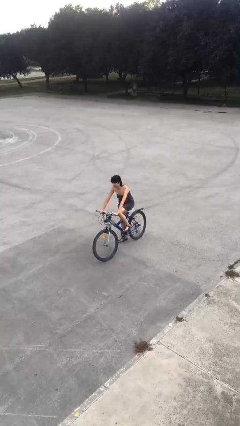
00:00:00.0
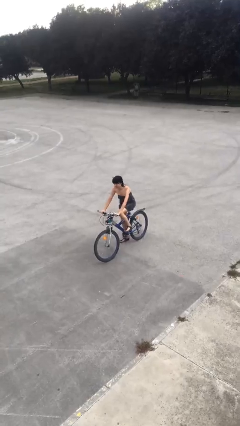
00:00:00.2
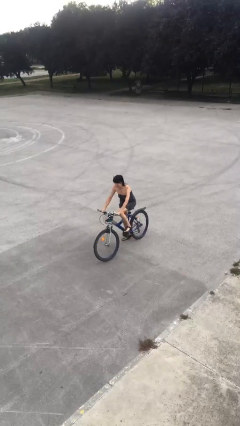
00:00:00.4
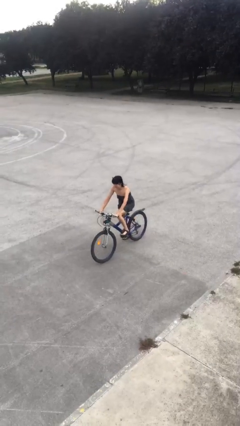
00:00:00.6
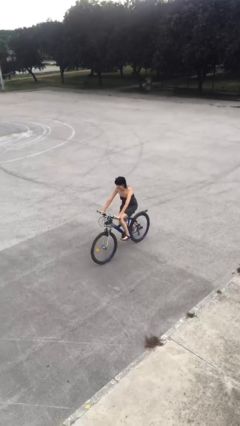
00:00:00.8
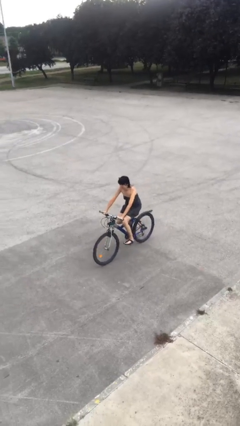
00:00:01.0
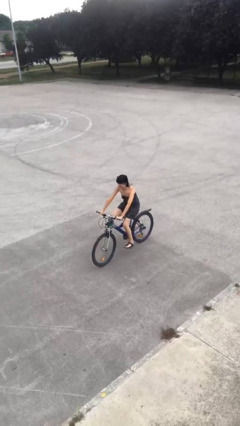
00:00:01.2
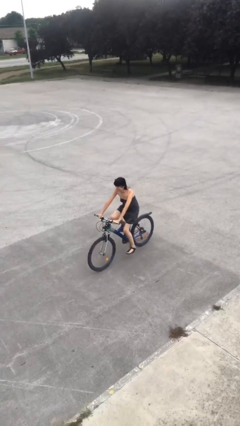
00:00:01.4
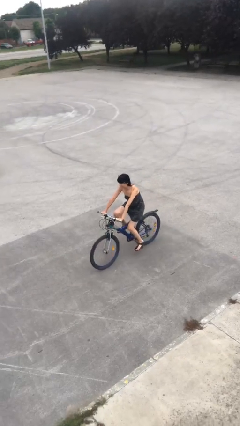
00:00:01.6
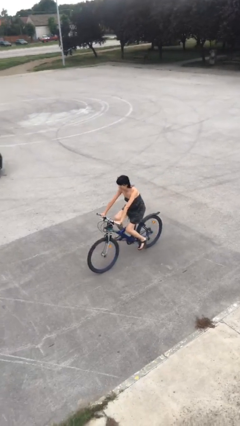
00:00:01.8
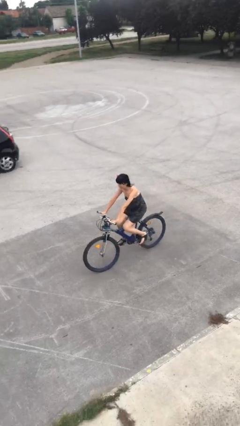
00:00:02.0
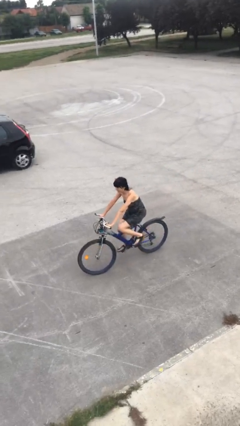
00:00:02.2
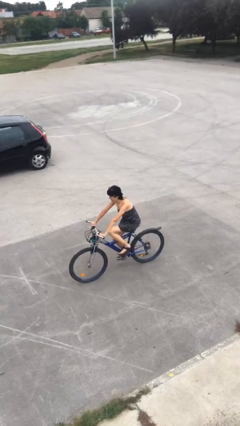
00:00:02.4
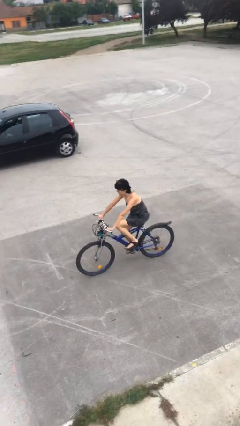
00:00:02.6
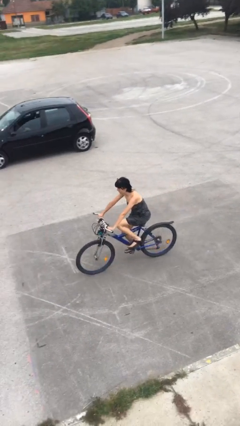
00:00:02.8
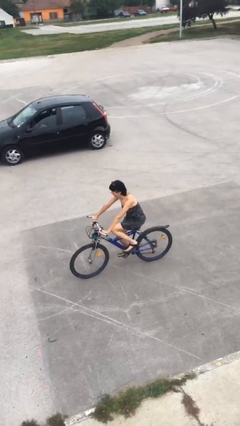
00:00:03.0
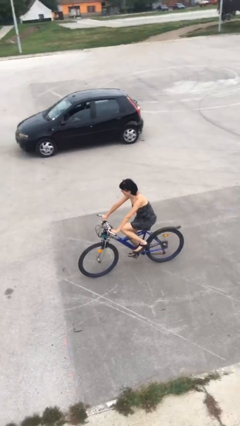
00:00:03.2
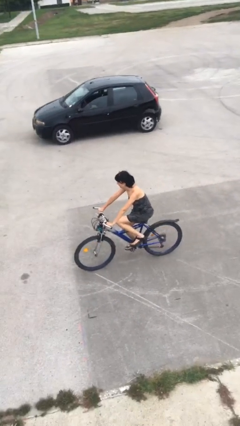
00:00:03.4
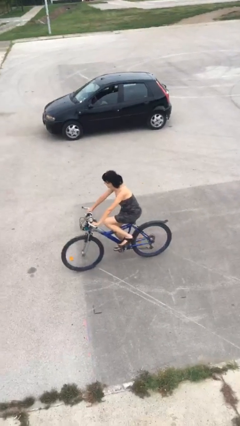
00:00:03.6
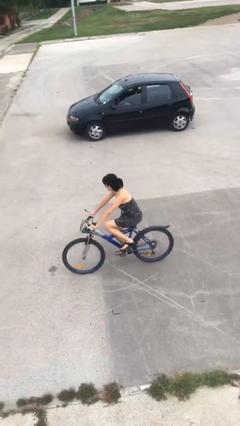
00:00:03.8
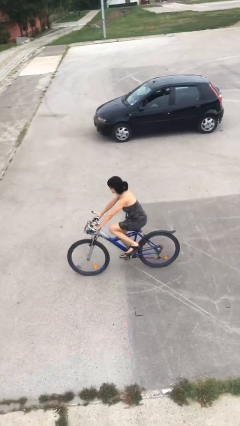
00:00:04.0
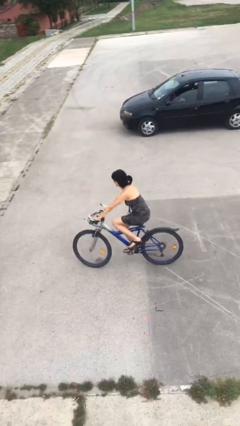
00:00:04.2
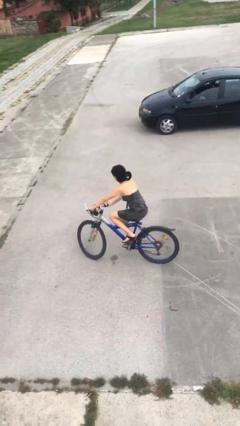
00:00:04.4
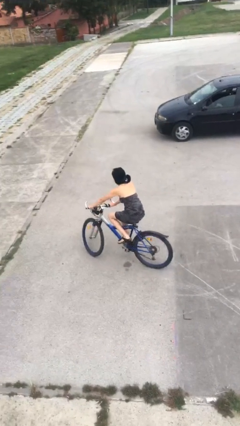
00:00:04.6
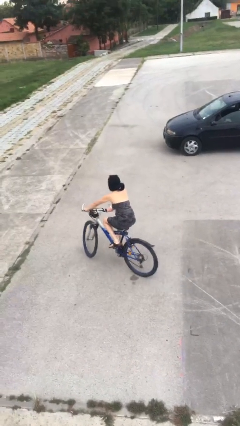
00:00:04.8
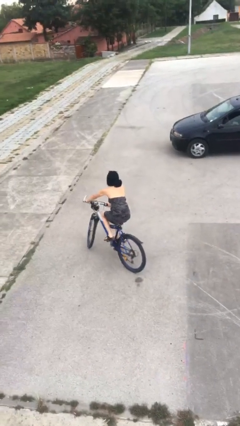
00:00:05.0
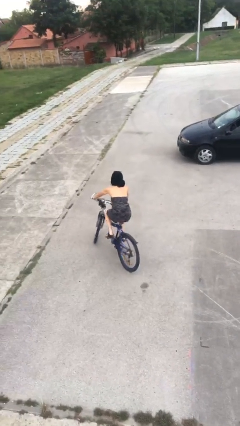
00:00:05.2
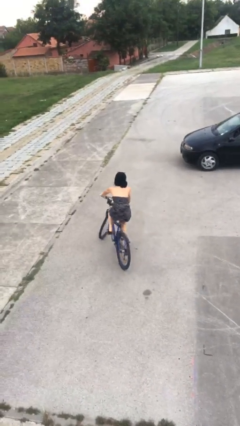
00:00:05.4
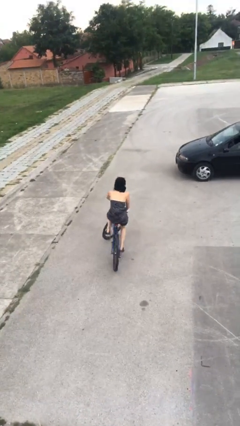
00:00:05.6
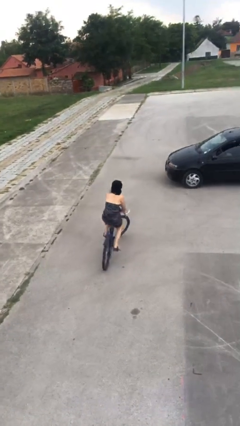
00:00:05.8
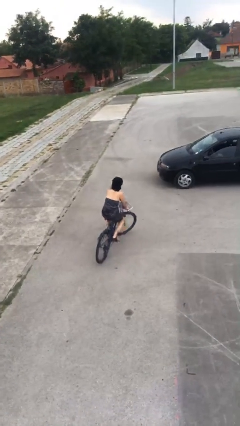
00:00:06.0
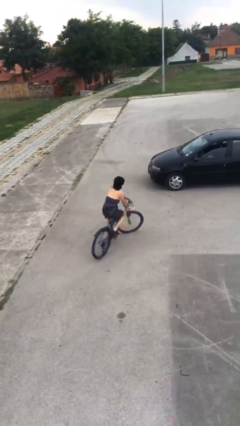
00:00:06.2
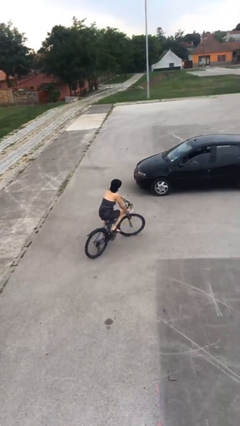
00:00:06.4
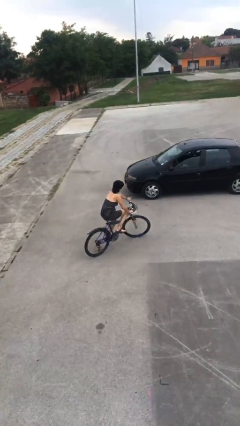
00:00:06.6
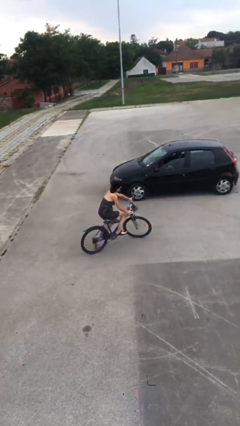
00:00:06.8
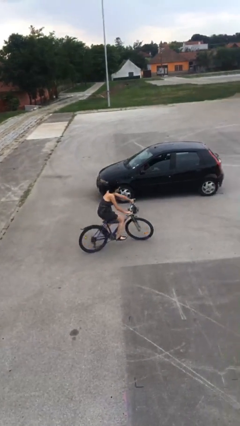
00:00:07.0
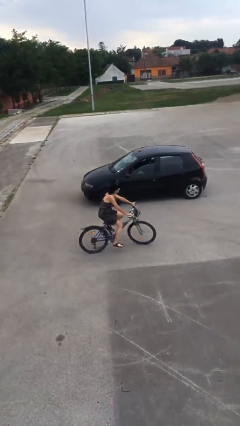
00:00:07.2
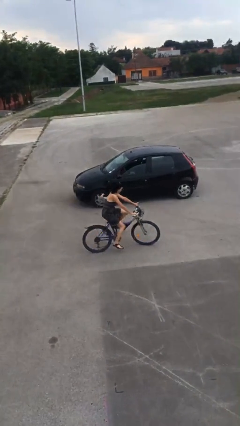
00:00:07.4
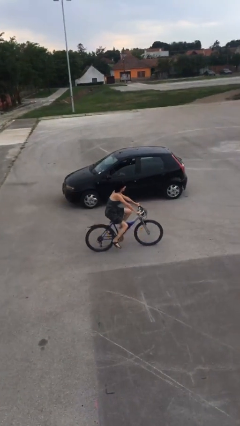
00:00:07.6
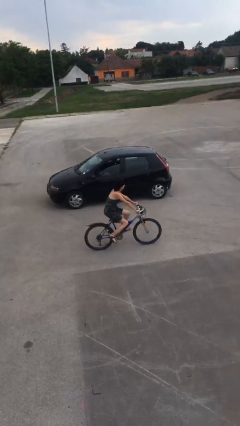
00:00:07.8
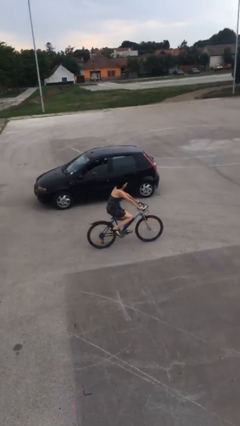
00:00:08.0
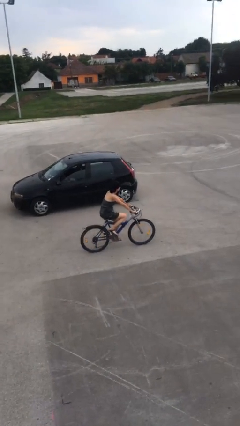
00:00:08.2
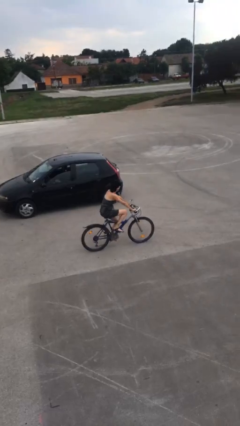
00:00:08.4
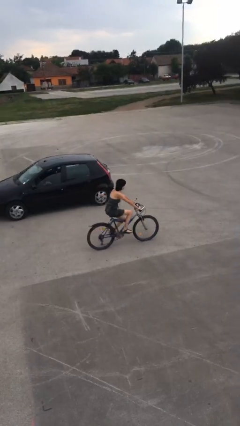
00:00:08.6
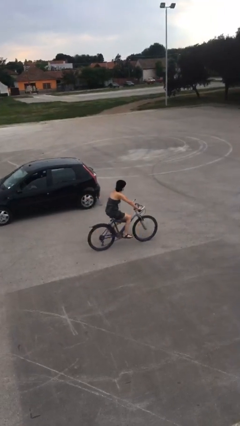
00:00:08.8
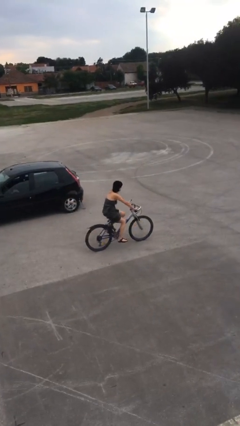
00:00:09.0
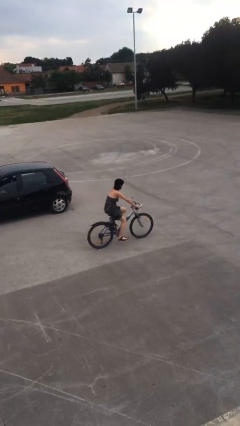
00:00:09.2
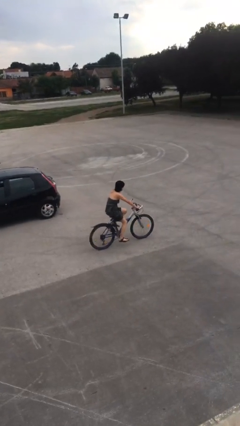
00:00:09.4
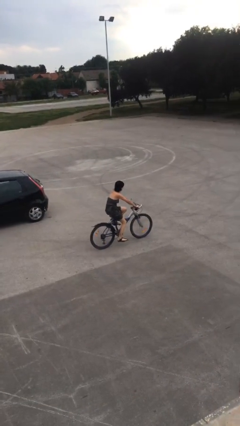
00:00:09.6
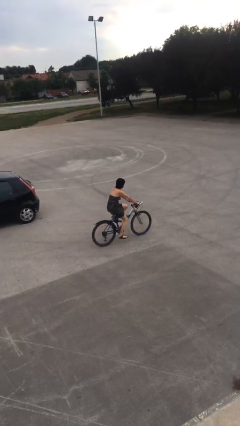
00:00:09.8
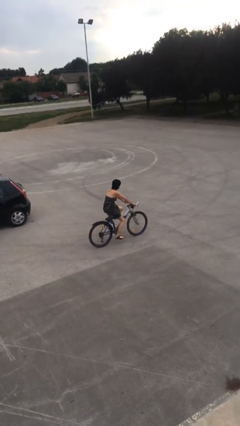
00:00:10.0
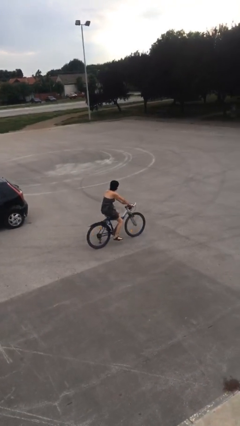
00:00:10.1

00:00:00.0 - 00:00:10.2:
person rides bicycle

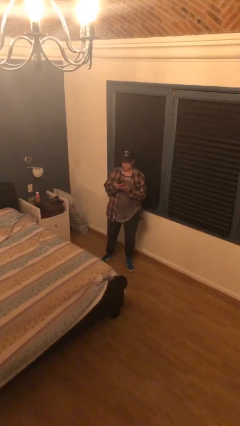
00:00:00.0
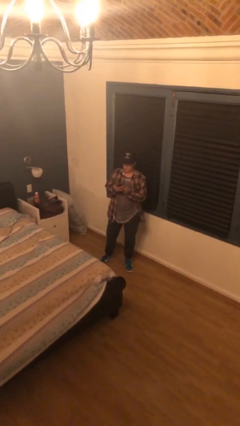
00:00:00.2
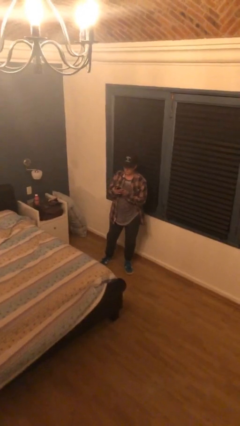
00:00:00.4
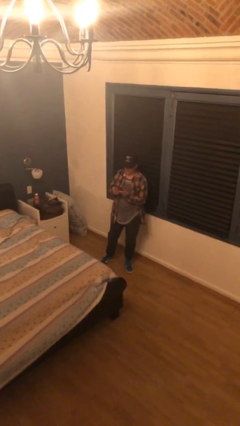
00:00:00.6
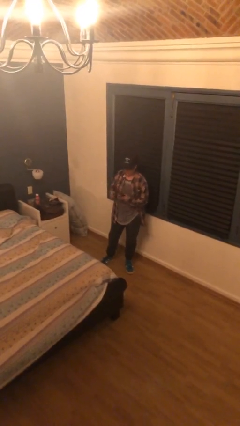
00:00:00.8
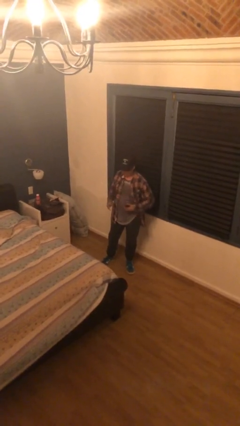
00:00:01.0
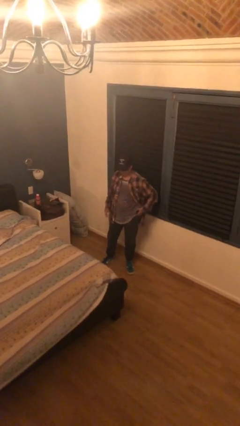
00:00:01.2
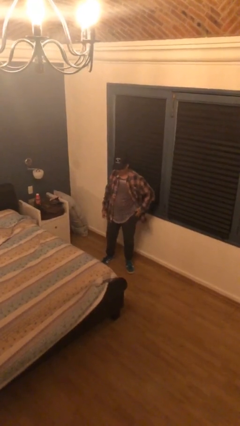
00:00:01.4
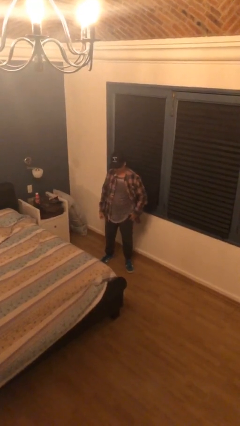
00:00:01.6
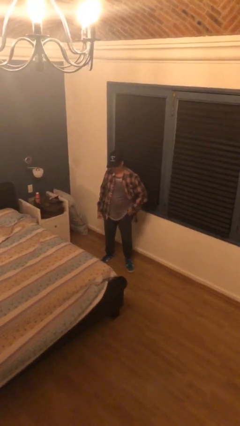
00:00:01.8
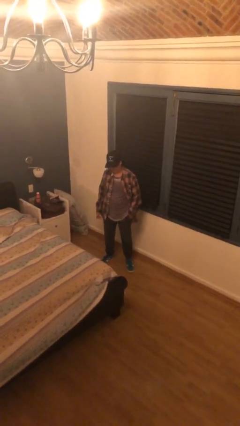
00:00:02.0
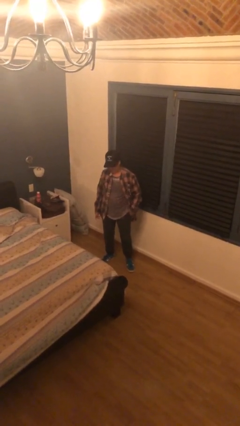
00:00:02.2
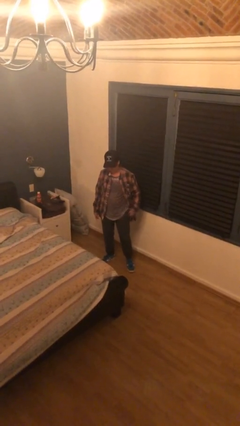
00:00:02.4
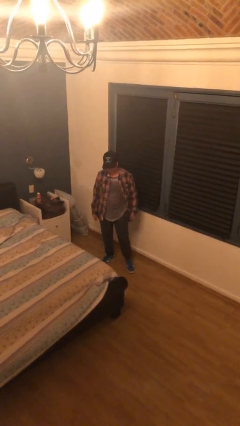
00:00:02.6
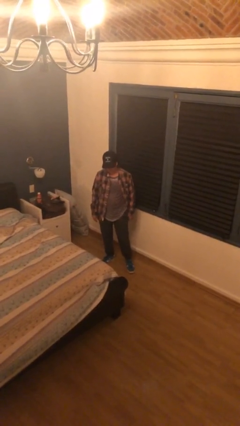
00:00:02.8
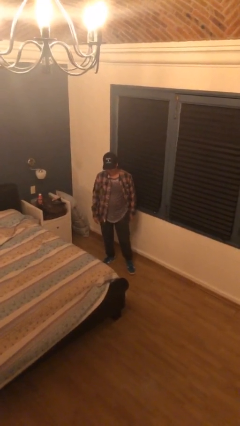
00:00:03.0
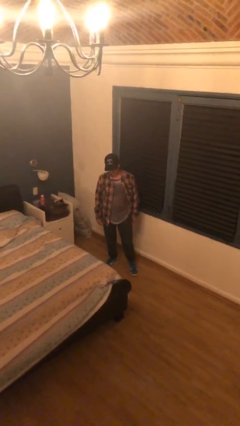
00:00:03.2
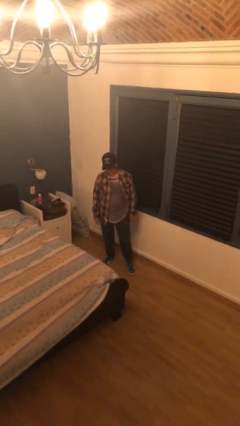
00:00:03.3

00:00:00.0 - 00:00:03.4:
person puts phone into pocket

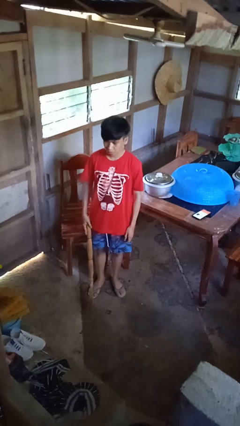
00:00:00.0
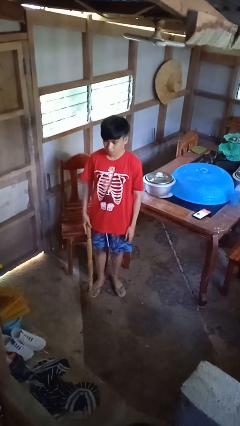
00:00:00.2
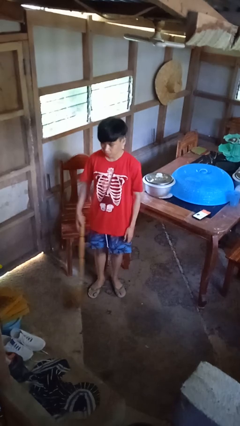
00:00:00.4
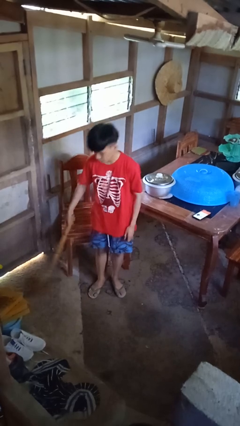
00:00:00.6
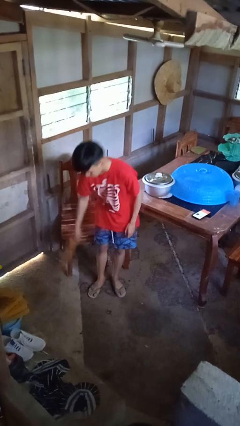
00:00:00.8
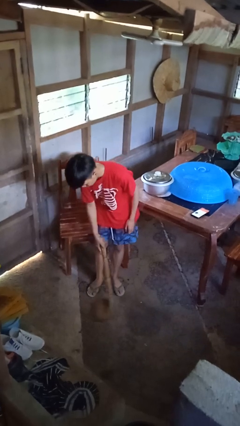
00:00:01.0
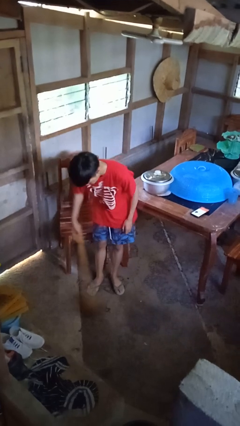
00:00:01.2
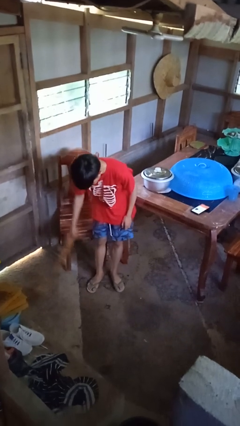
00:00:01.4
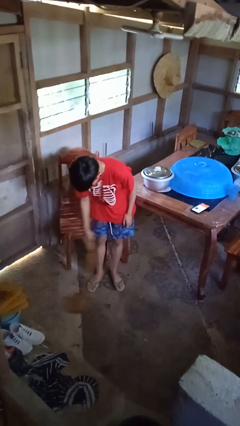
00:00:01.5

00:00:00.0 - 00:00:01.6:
person sweeps floor

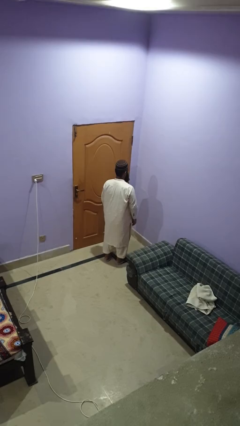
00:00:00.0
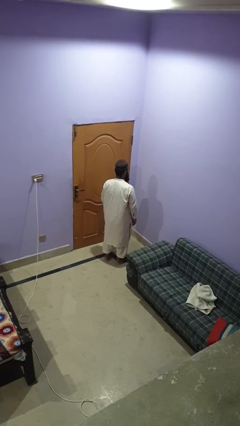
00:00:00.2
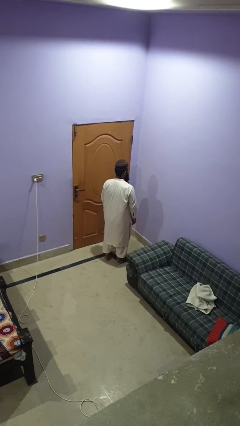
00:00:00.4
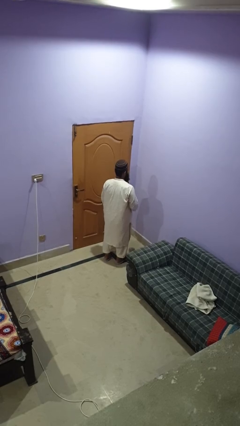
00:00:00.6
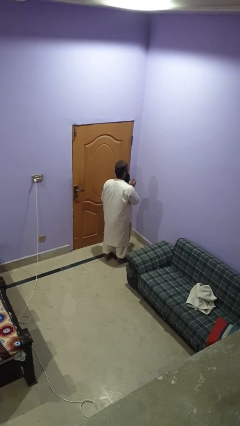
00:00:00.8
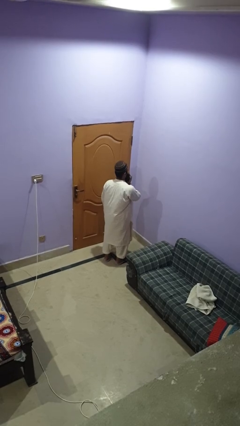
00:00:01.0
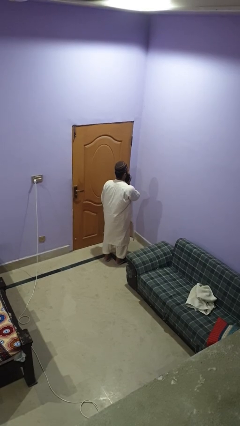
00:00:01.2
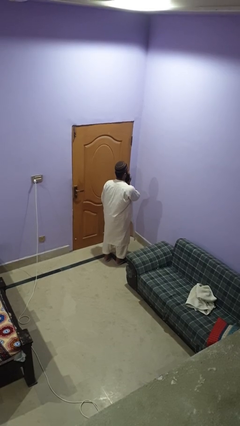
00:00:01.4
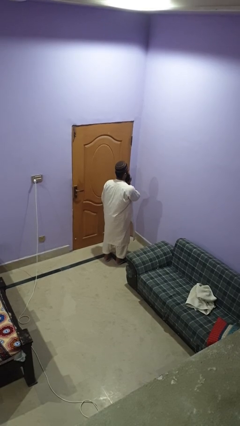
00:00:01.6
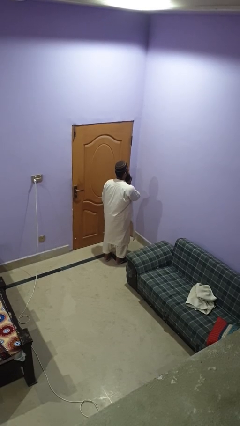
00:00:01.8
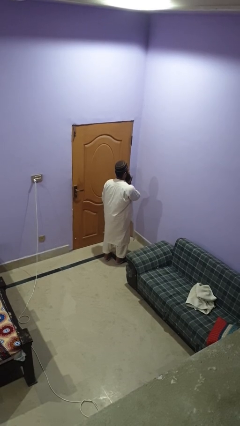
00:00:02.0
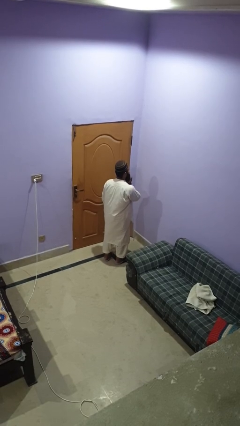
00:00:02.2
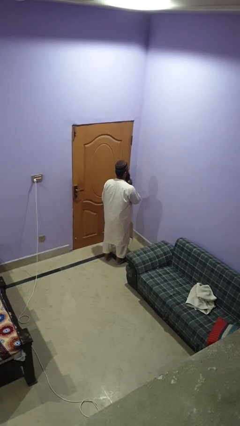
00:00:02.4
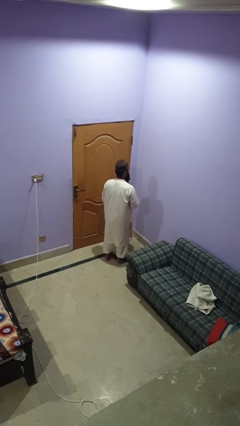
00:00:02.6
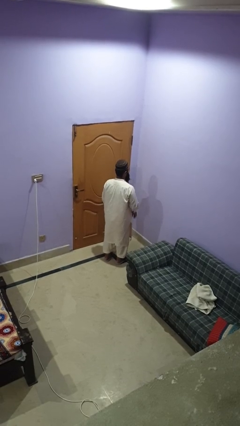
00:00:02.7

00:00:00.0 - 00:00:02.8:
person strokes chin
